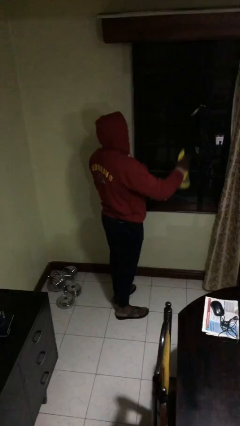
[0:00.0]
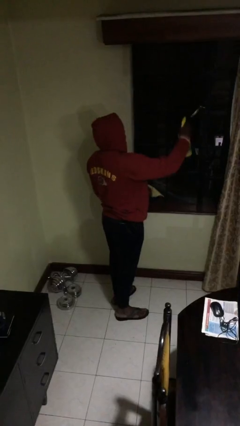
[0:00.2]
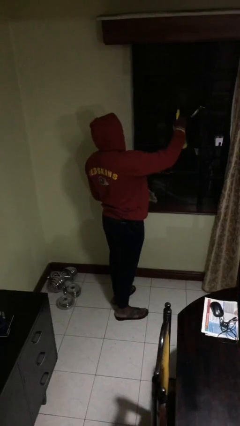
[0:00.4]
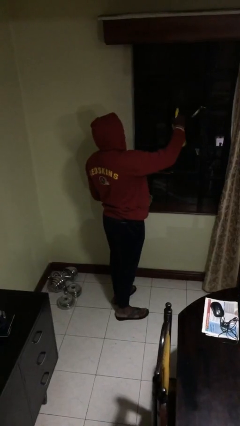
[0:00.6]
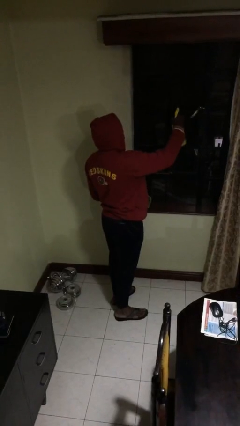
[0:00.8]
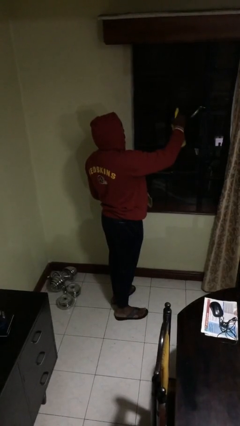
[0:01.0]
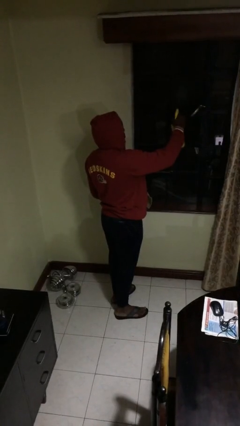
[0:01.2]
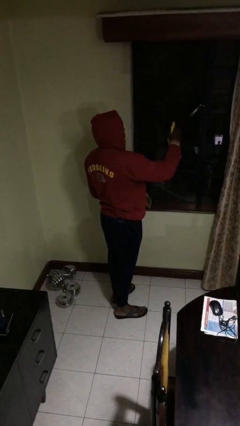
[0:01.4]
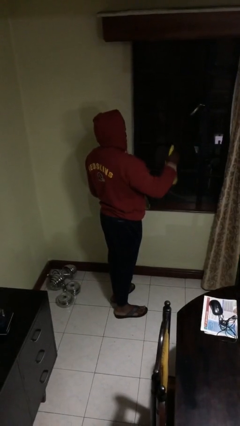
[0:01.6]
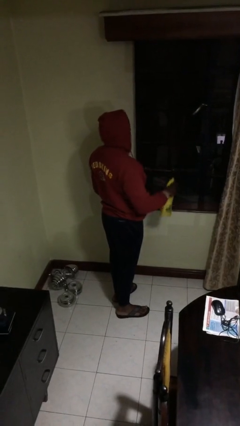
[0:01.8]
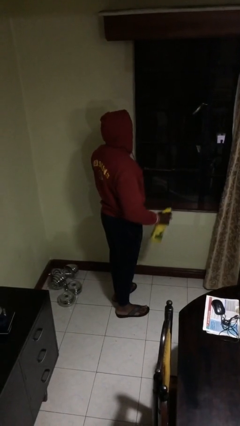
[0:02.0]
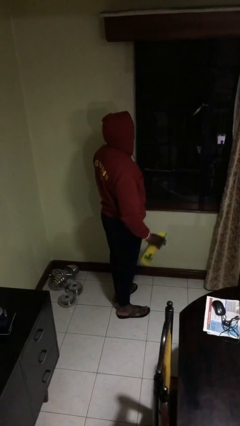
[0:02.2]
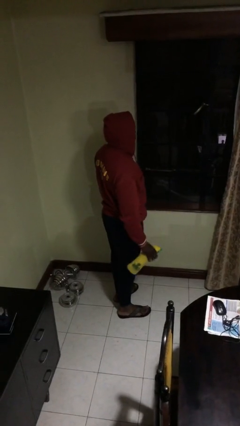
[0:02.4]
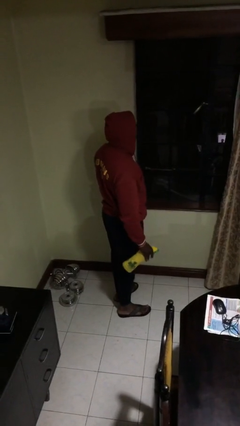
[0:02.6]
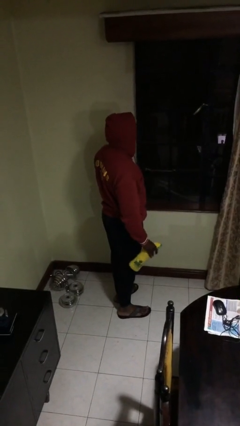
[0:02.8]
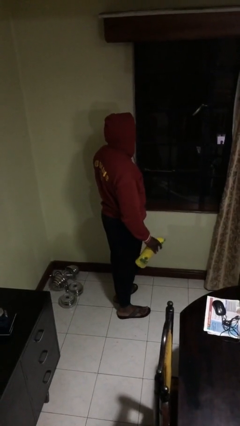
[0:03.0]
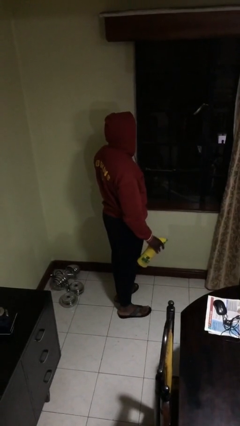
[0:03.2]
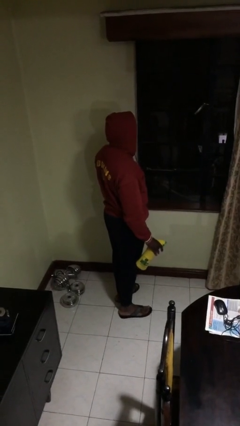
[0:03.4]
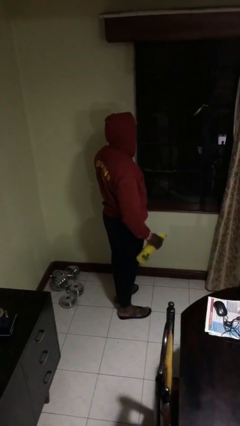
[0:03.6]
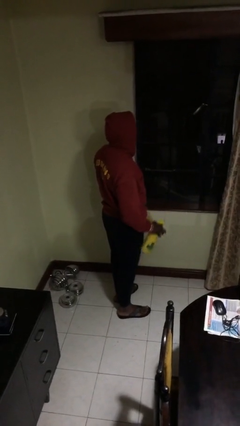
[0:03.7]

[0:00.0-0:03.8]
person sprays from bottle

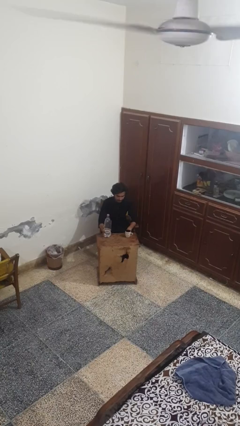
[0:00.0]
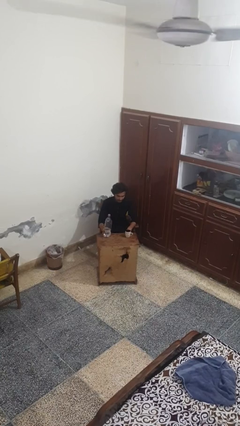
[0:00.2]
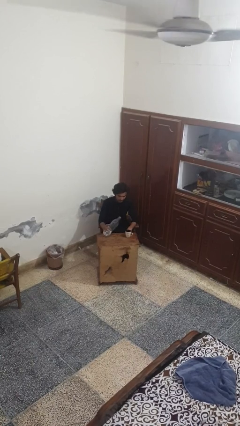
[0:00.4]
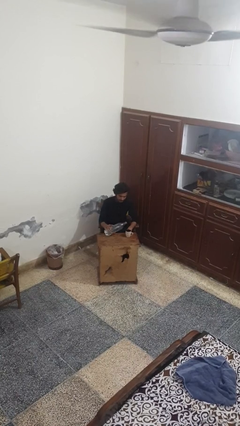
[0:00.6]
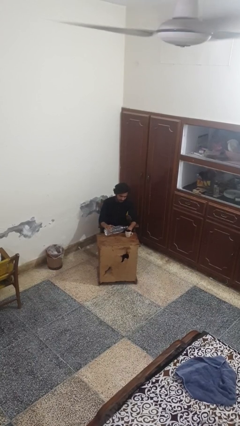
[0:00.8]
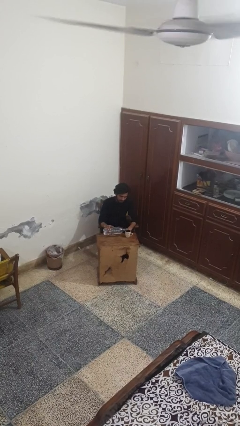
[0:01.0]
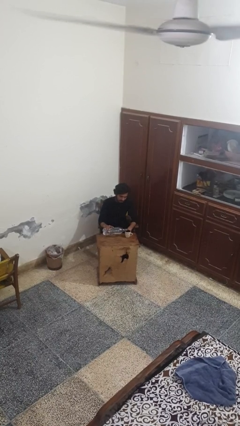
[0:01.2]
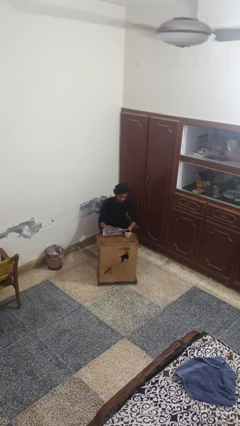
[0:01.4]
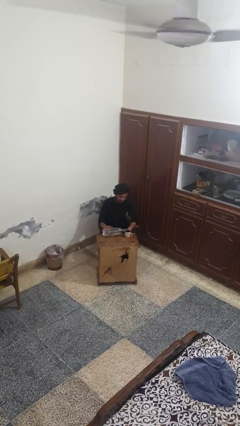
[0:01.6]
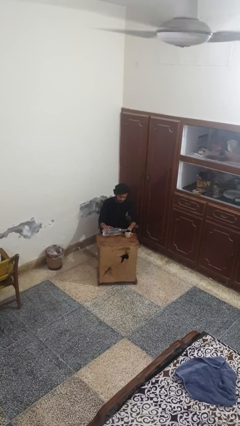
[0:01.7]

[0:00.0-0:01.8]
person pours liquid into cup

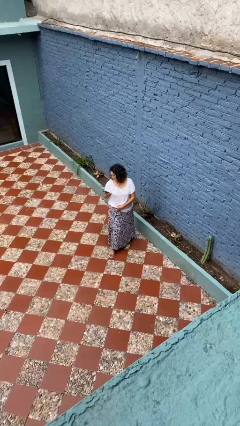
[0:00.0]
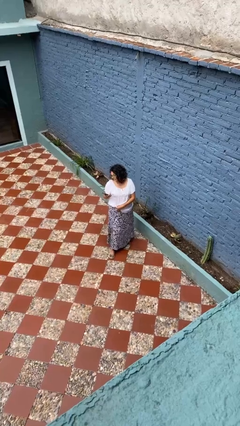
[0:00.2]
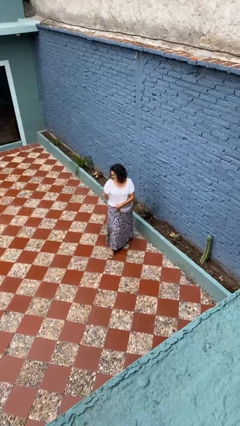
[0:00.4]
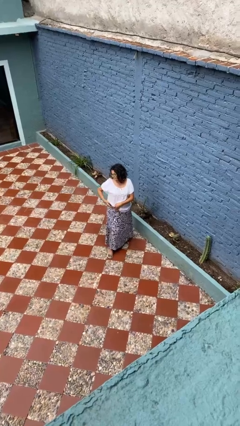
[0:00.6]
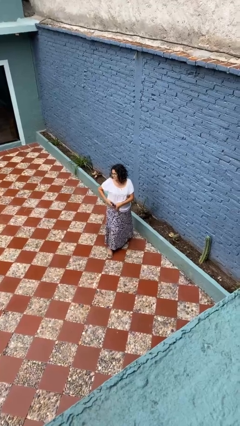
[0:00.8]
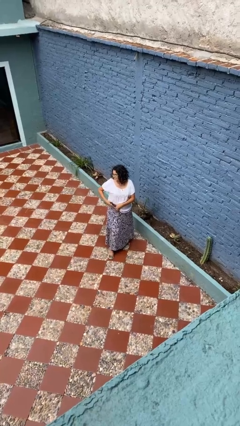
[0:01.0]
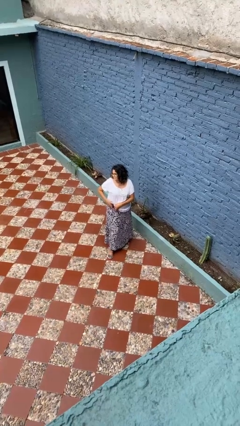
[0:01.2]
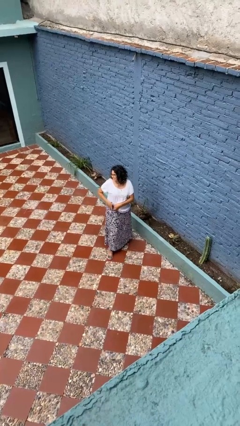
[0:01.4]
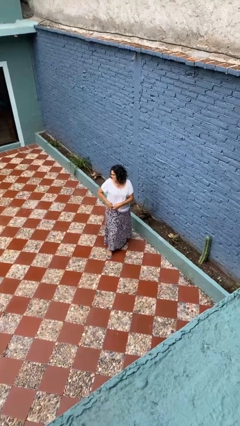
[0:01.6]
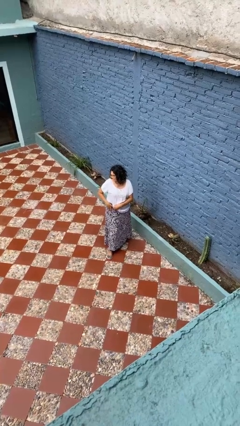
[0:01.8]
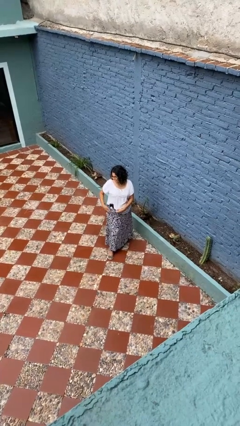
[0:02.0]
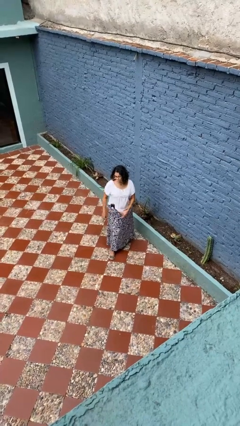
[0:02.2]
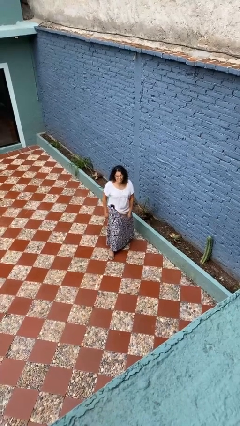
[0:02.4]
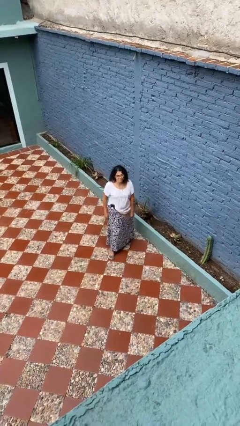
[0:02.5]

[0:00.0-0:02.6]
person puts phone into pocket

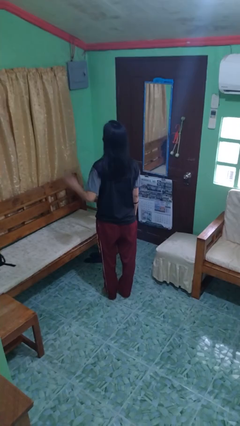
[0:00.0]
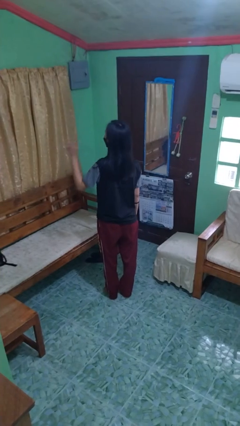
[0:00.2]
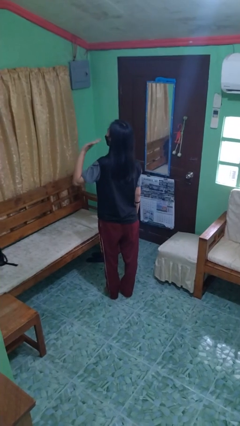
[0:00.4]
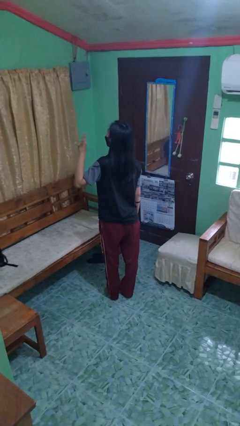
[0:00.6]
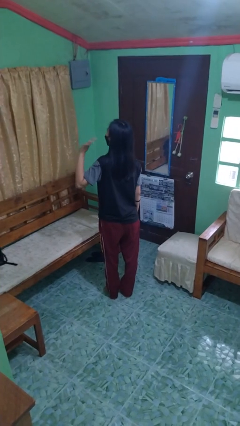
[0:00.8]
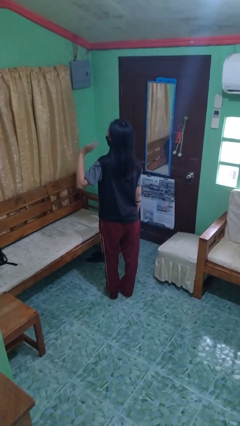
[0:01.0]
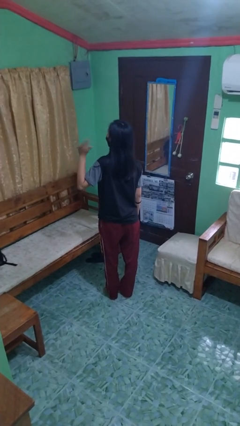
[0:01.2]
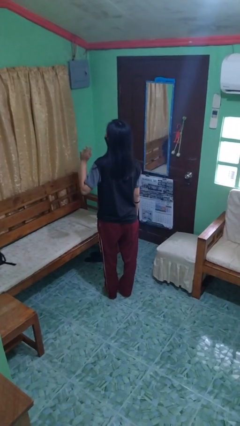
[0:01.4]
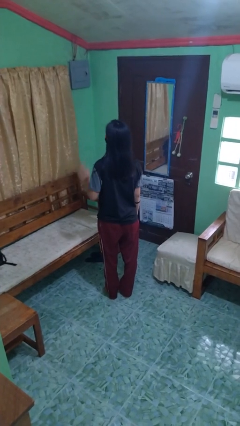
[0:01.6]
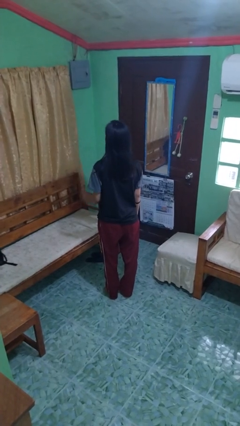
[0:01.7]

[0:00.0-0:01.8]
person waves at person

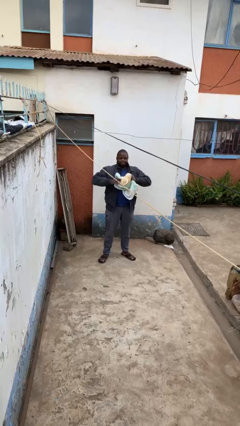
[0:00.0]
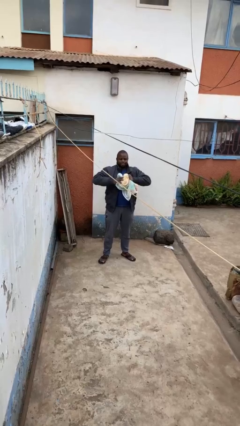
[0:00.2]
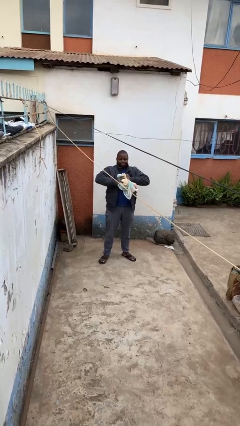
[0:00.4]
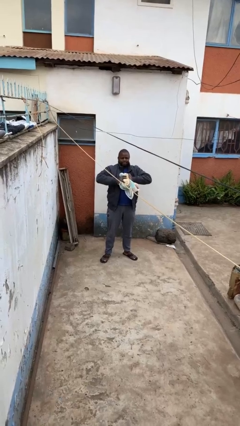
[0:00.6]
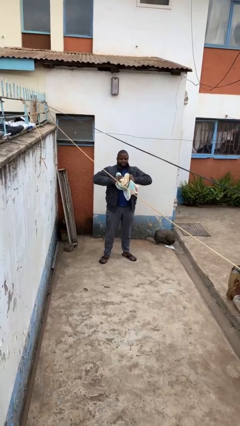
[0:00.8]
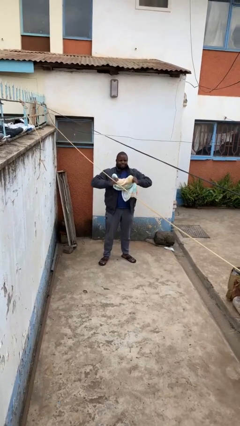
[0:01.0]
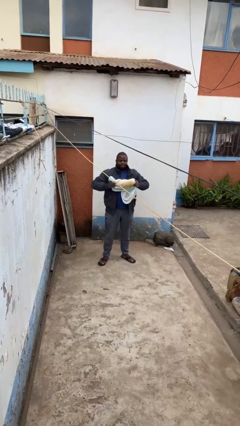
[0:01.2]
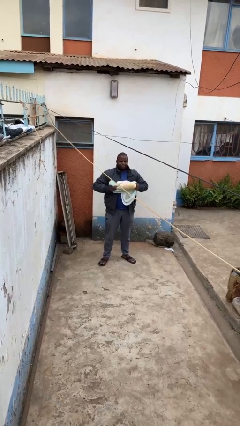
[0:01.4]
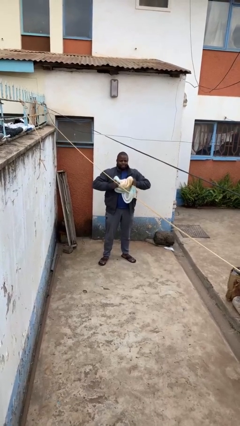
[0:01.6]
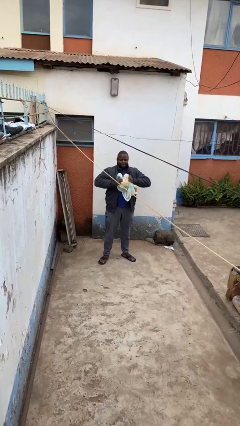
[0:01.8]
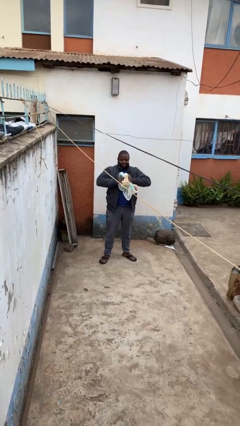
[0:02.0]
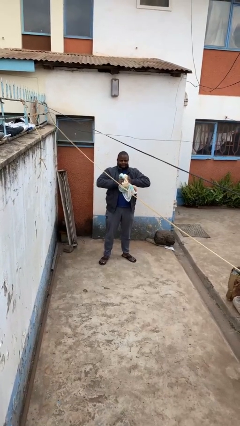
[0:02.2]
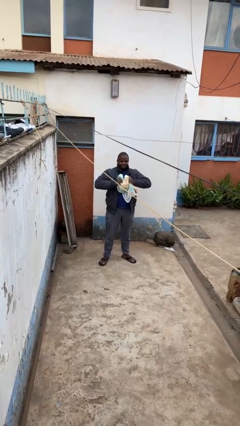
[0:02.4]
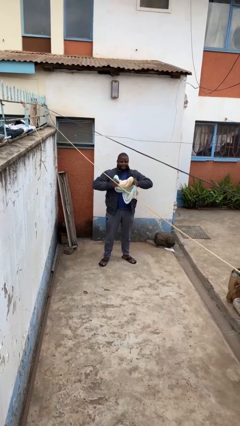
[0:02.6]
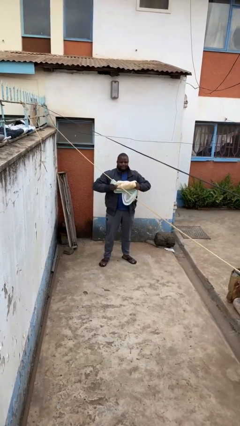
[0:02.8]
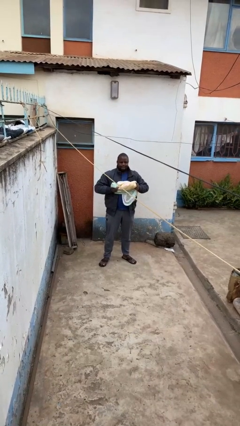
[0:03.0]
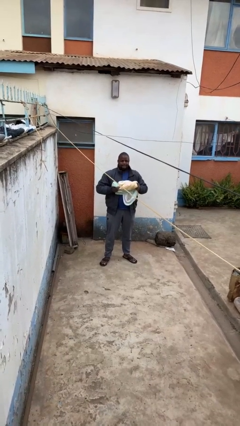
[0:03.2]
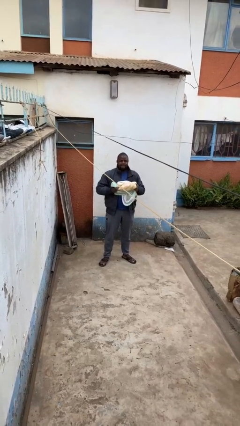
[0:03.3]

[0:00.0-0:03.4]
person squeezes object

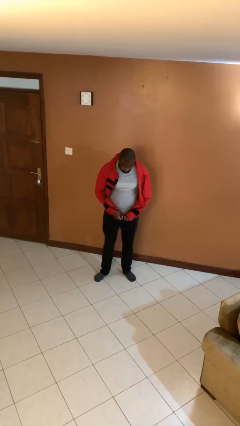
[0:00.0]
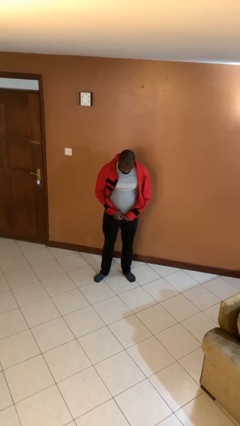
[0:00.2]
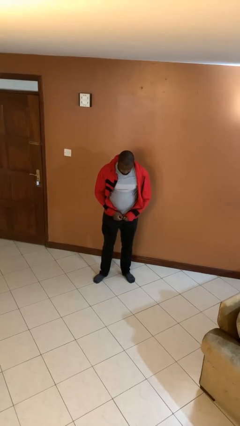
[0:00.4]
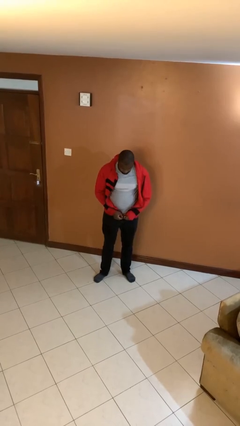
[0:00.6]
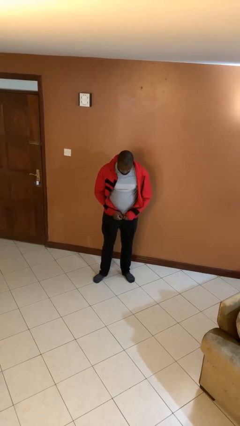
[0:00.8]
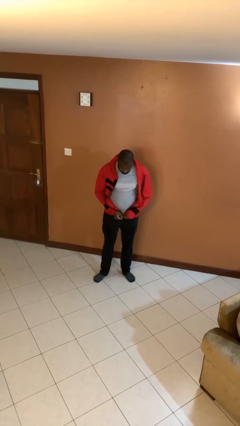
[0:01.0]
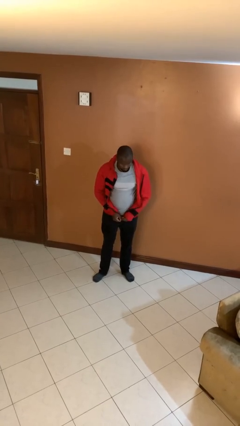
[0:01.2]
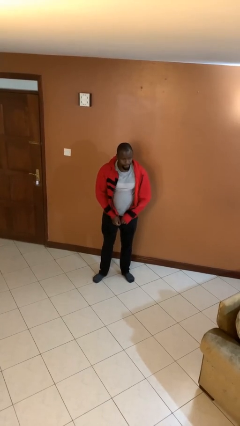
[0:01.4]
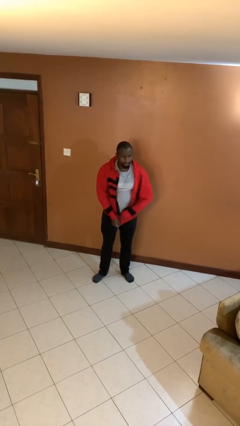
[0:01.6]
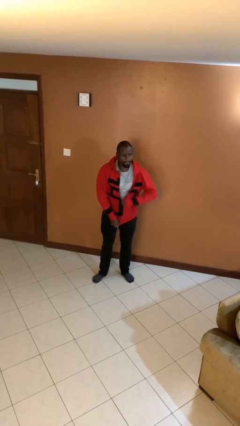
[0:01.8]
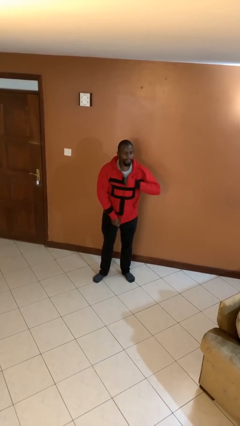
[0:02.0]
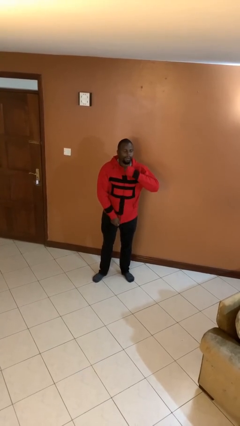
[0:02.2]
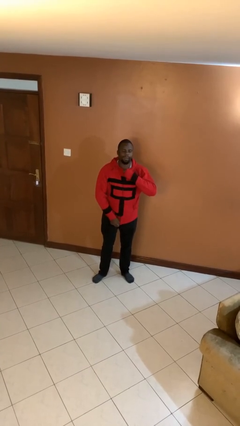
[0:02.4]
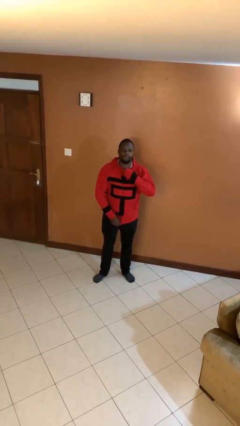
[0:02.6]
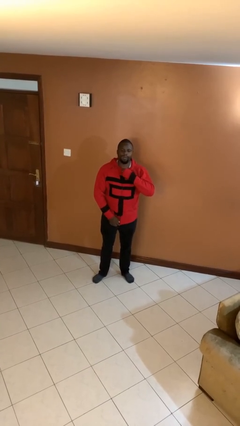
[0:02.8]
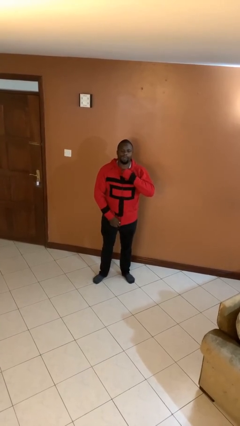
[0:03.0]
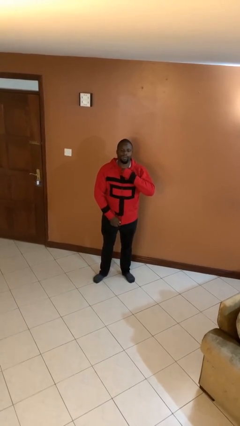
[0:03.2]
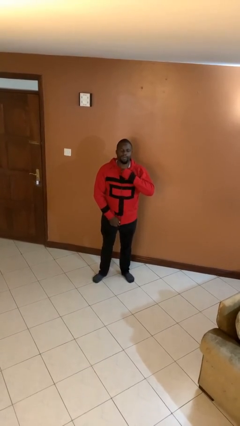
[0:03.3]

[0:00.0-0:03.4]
person zips up jacket
